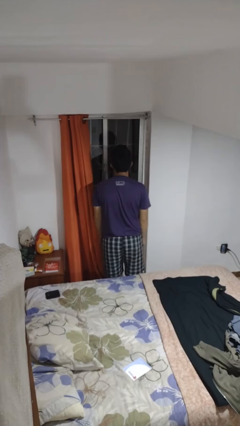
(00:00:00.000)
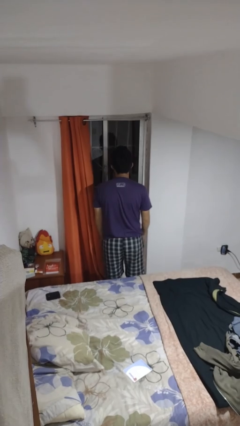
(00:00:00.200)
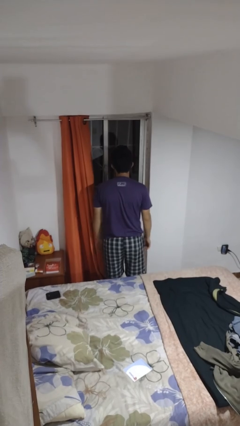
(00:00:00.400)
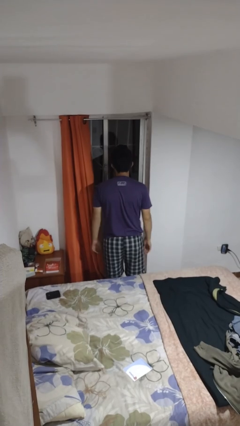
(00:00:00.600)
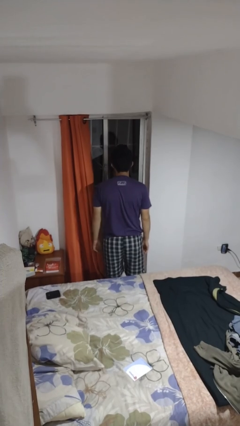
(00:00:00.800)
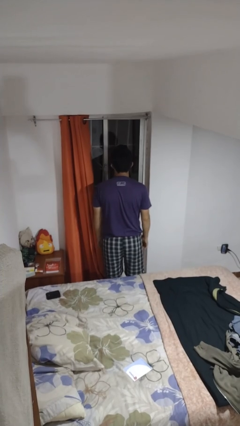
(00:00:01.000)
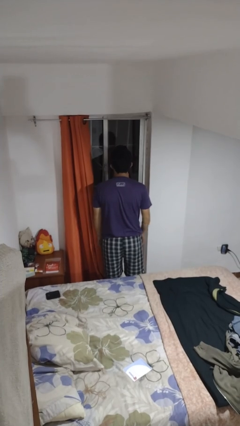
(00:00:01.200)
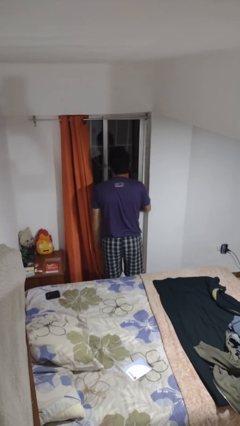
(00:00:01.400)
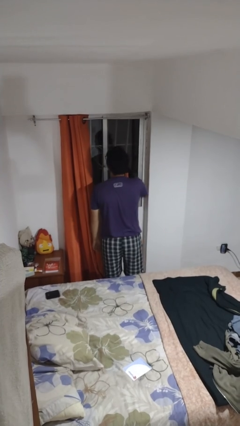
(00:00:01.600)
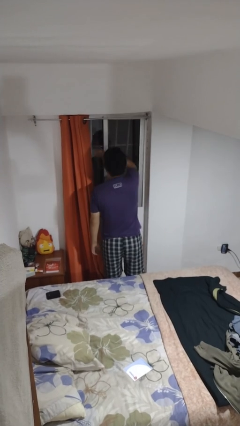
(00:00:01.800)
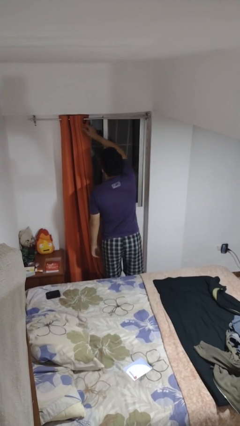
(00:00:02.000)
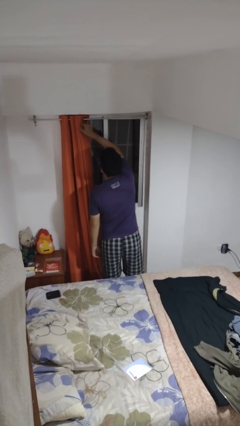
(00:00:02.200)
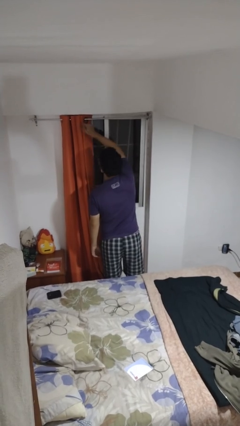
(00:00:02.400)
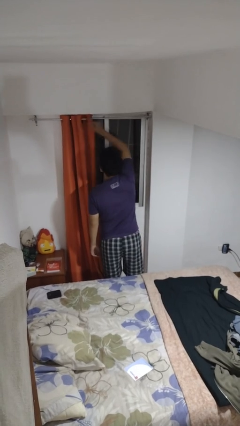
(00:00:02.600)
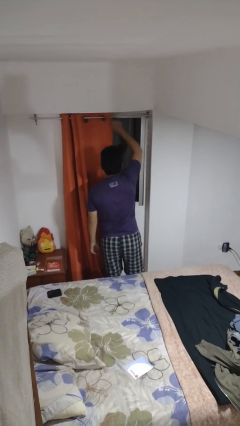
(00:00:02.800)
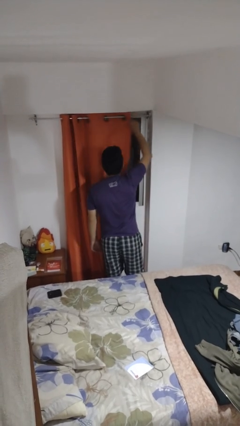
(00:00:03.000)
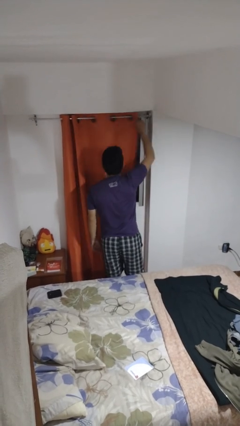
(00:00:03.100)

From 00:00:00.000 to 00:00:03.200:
person closes curtains

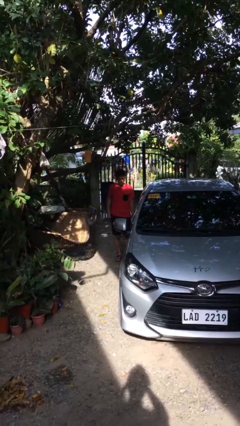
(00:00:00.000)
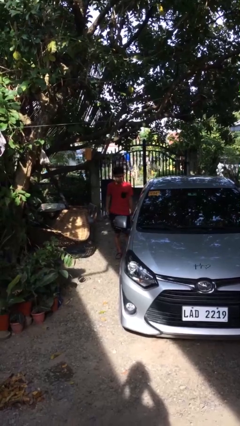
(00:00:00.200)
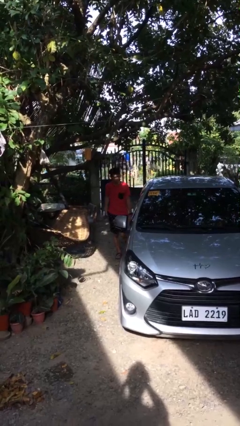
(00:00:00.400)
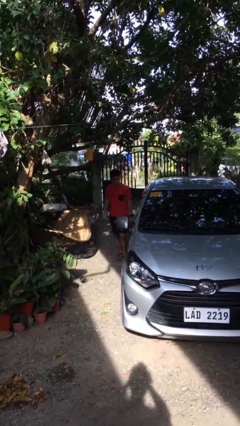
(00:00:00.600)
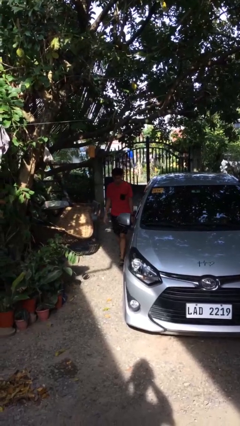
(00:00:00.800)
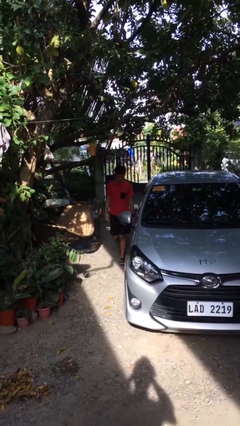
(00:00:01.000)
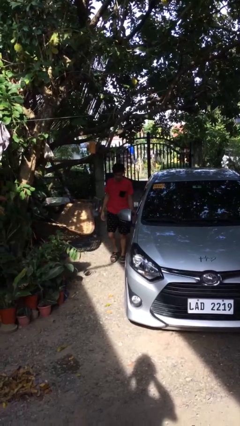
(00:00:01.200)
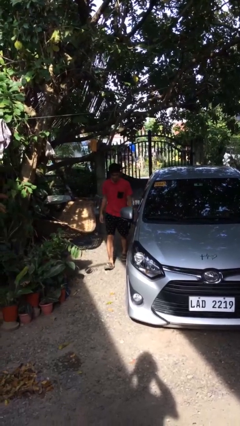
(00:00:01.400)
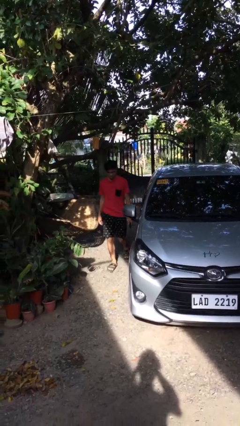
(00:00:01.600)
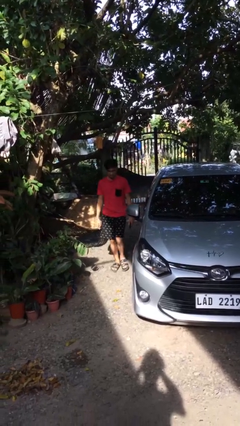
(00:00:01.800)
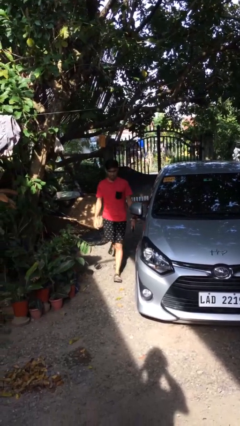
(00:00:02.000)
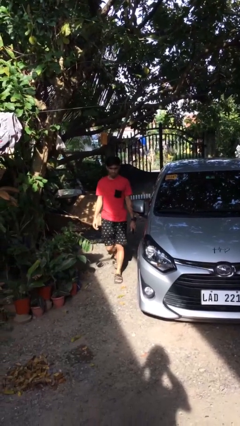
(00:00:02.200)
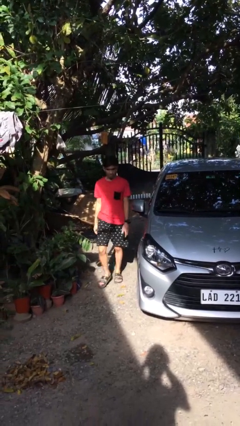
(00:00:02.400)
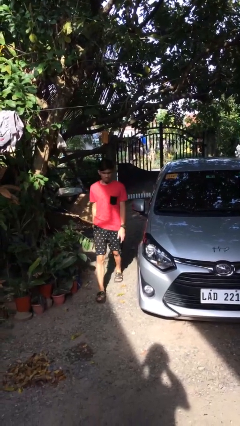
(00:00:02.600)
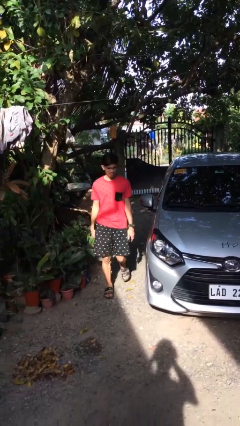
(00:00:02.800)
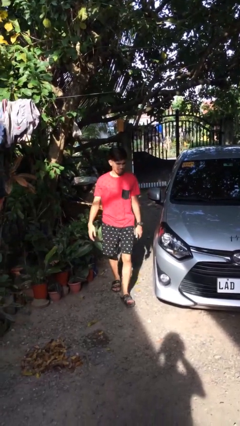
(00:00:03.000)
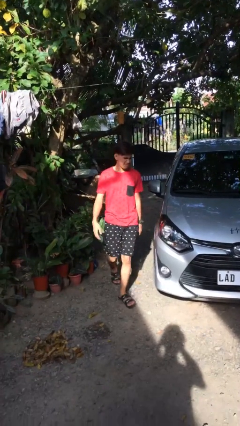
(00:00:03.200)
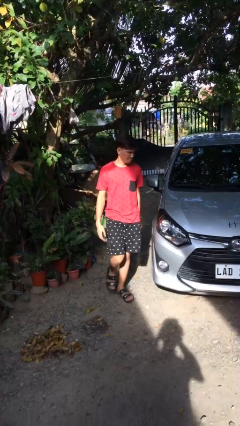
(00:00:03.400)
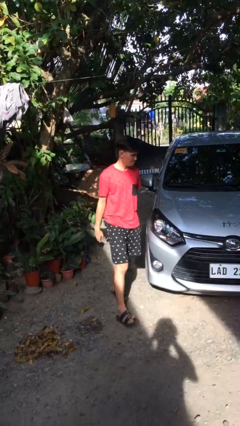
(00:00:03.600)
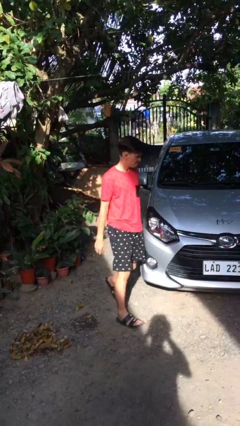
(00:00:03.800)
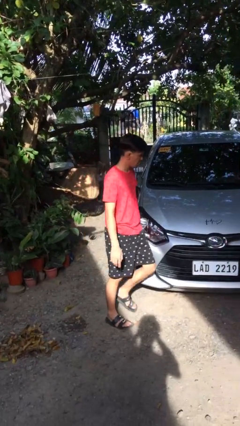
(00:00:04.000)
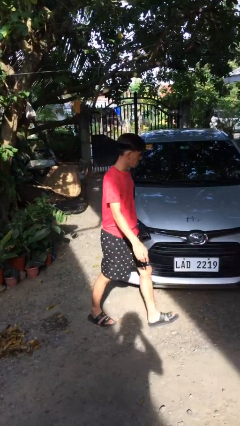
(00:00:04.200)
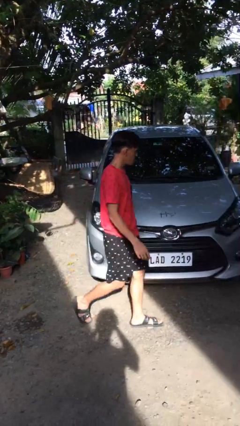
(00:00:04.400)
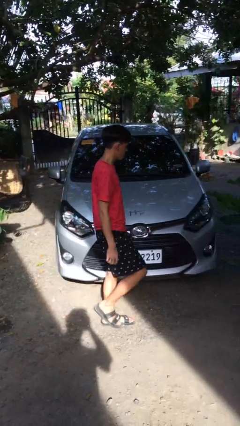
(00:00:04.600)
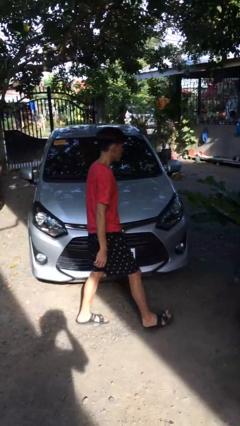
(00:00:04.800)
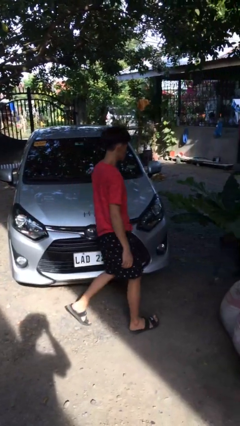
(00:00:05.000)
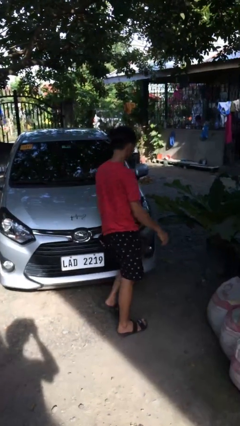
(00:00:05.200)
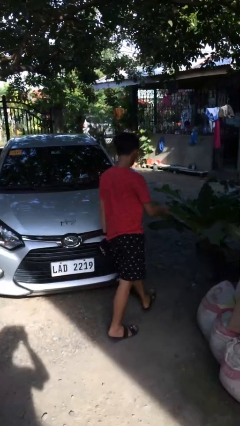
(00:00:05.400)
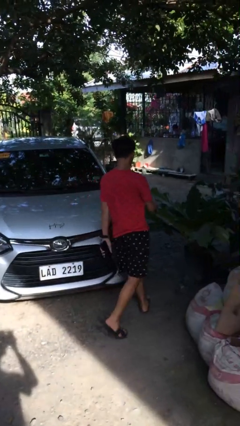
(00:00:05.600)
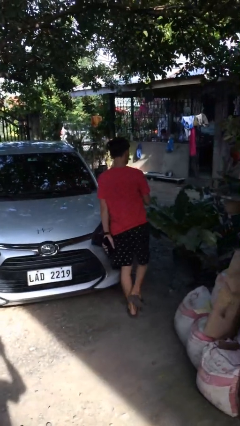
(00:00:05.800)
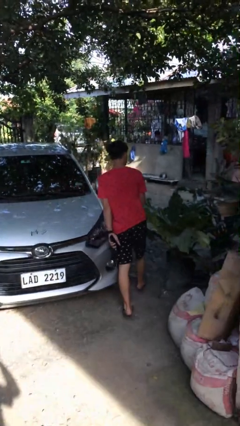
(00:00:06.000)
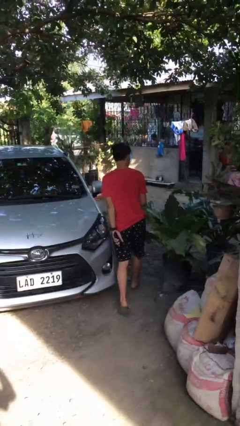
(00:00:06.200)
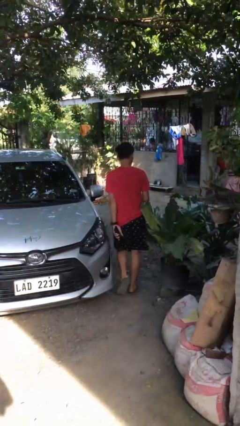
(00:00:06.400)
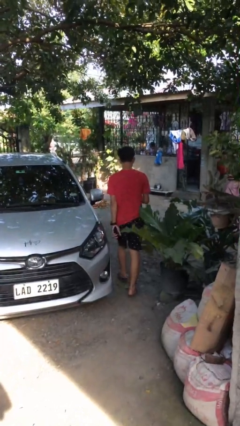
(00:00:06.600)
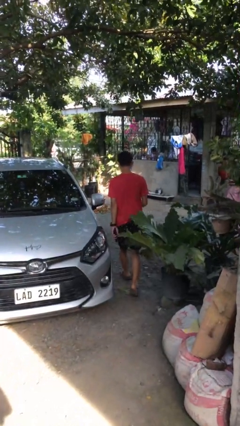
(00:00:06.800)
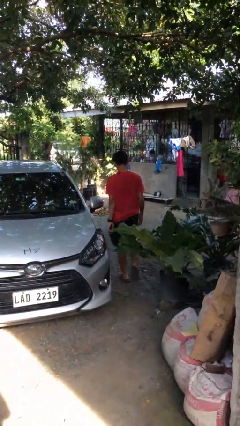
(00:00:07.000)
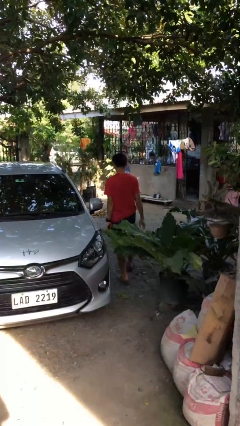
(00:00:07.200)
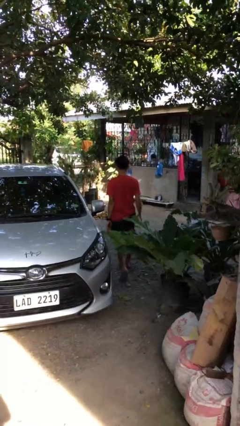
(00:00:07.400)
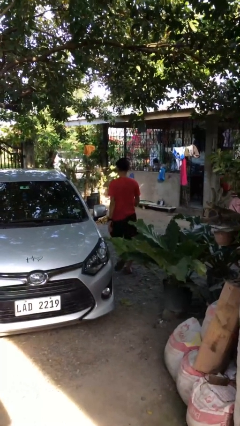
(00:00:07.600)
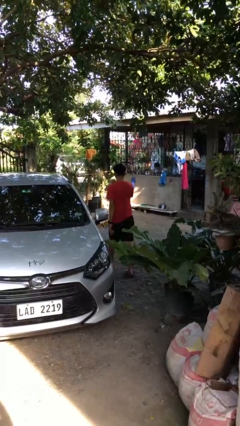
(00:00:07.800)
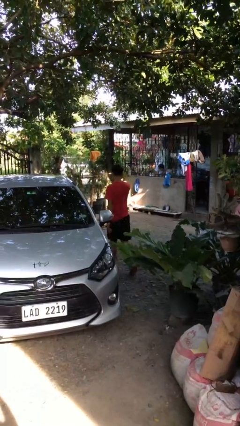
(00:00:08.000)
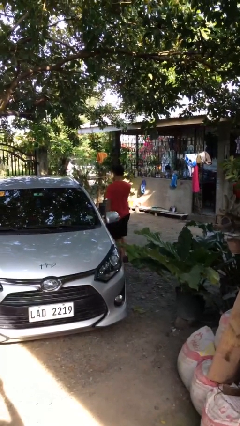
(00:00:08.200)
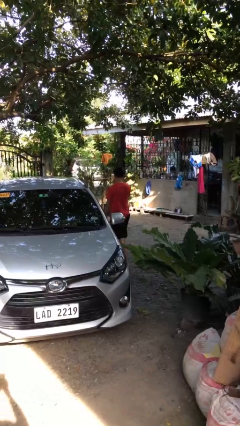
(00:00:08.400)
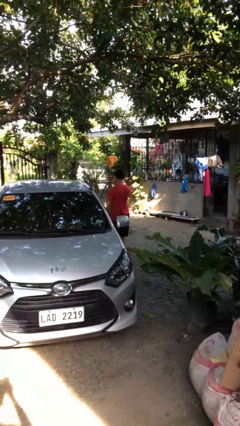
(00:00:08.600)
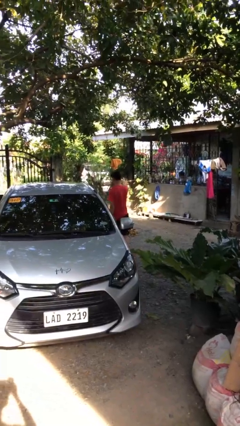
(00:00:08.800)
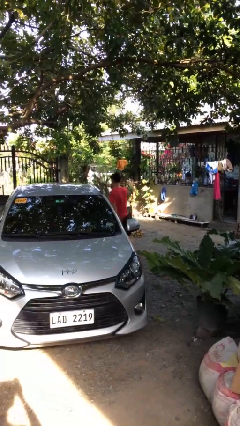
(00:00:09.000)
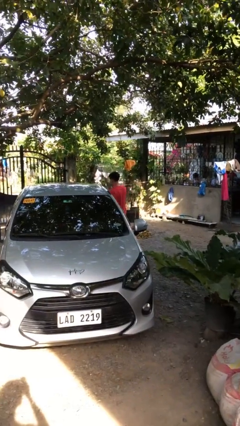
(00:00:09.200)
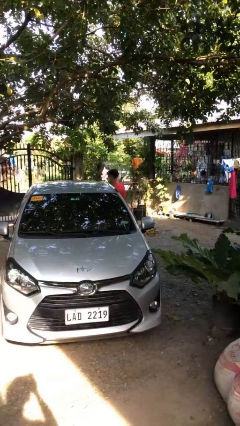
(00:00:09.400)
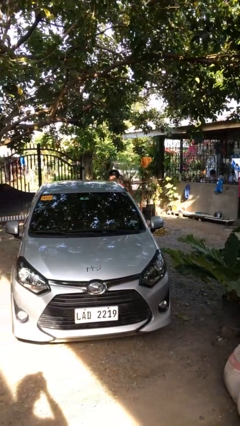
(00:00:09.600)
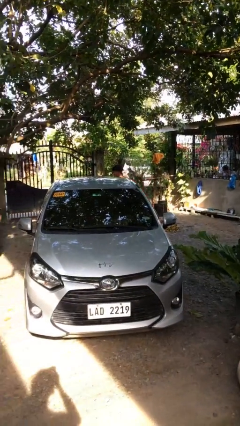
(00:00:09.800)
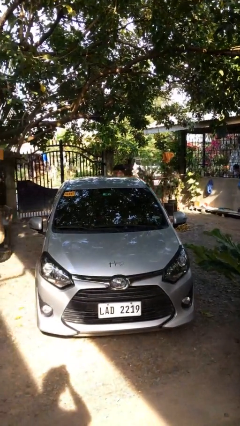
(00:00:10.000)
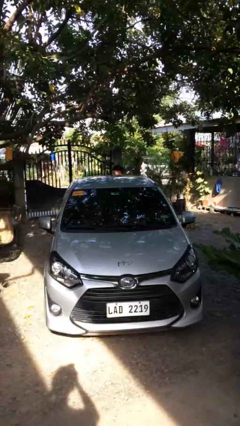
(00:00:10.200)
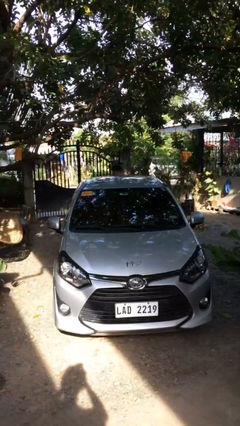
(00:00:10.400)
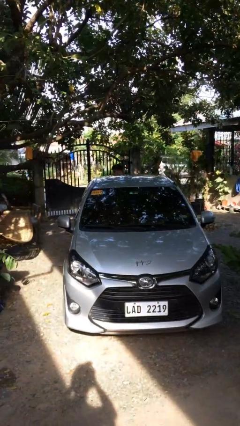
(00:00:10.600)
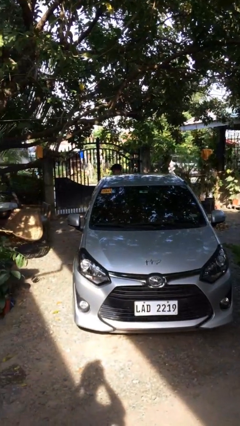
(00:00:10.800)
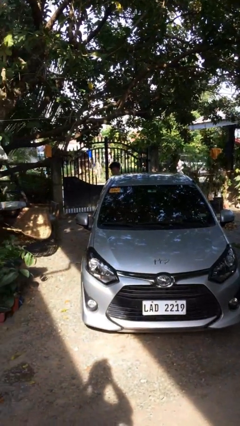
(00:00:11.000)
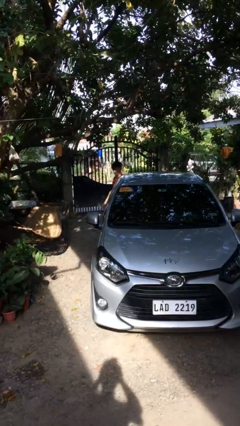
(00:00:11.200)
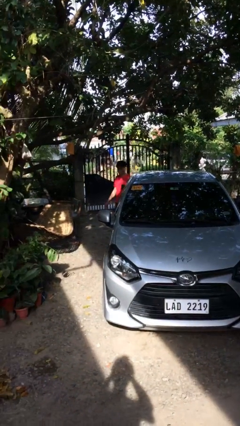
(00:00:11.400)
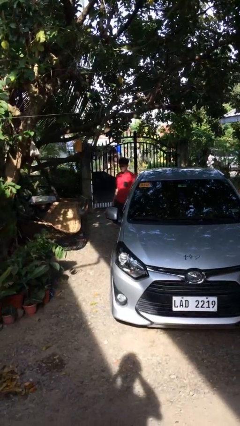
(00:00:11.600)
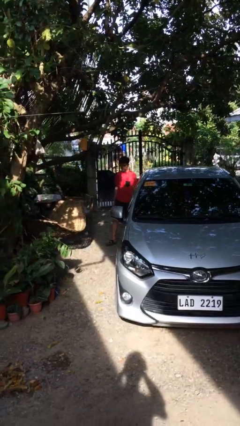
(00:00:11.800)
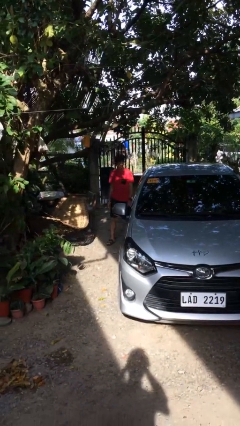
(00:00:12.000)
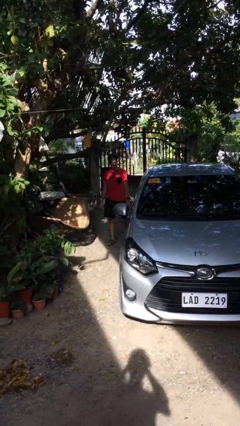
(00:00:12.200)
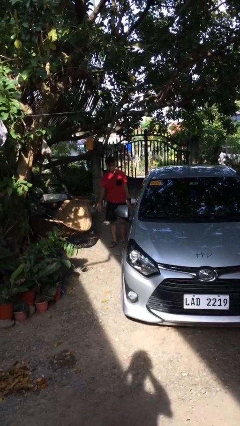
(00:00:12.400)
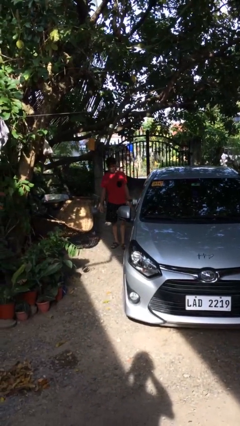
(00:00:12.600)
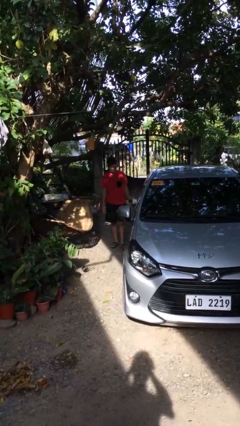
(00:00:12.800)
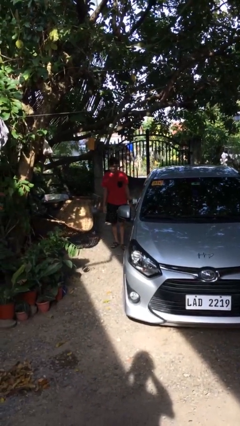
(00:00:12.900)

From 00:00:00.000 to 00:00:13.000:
person walks around car

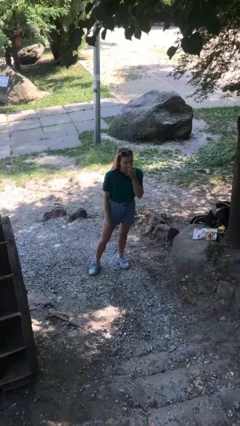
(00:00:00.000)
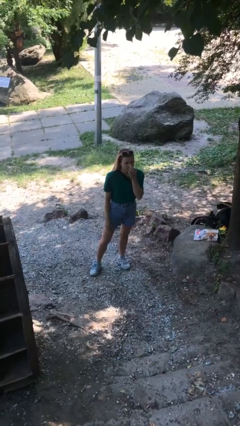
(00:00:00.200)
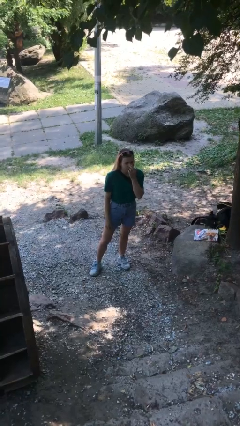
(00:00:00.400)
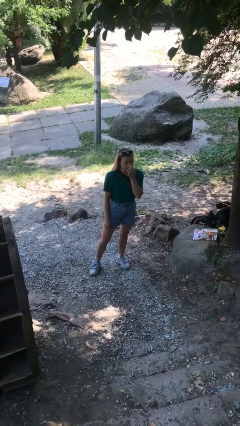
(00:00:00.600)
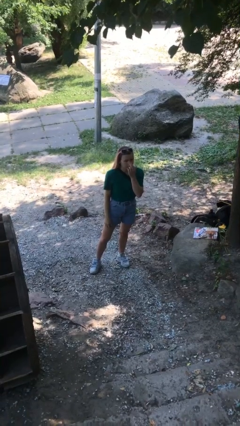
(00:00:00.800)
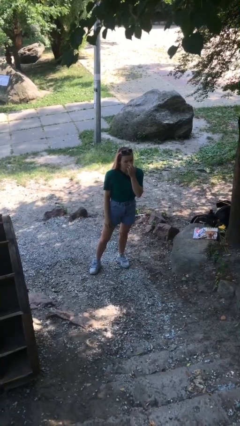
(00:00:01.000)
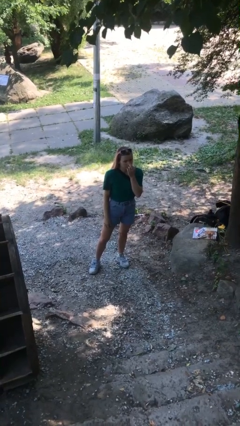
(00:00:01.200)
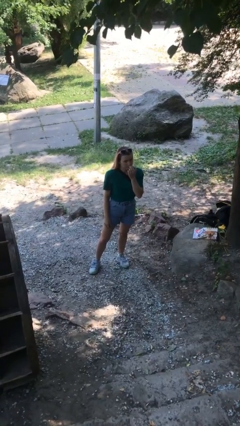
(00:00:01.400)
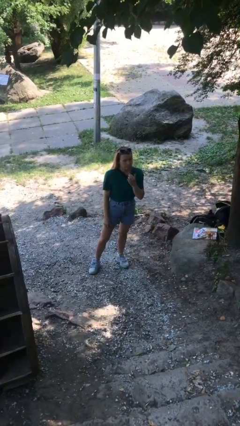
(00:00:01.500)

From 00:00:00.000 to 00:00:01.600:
person scratches face

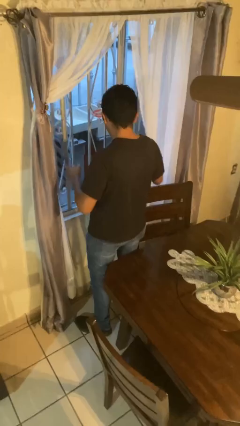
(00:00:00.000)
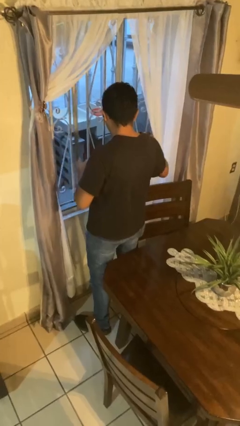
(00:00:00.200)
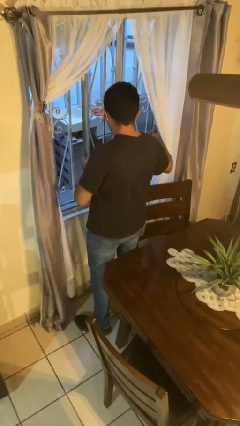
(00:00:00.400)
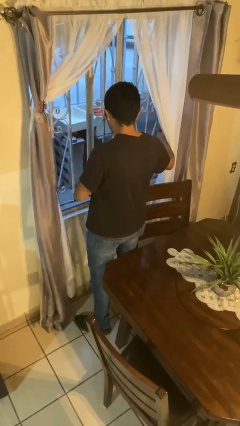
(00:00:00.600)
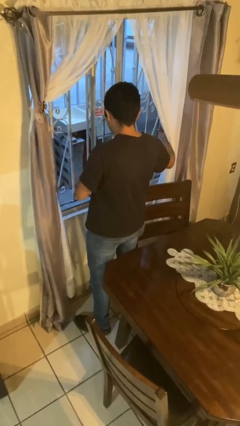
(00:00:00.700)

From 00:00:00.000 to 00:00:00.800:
person opens home window
